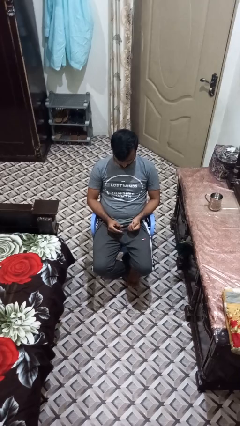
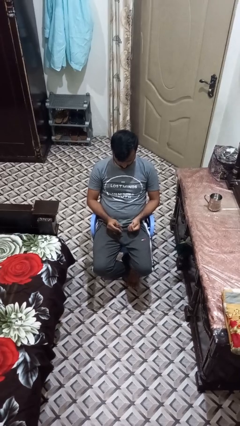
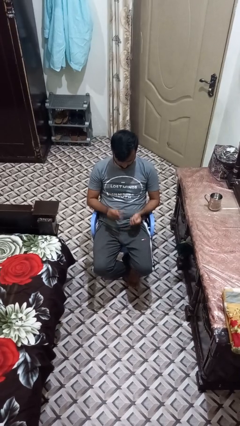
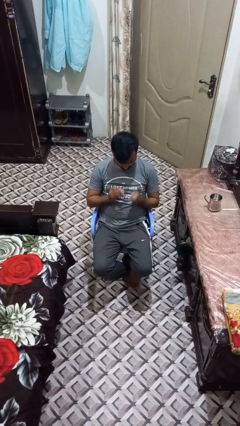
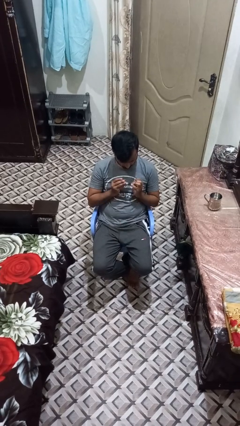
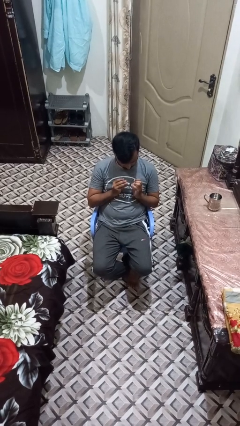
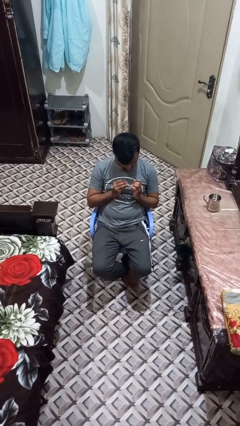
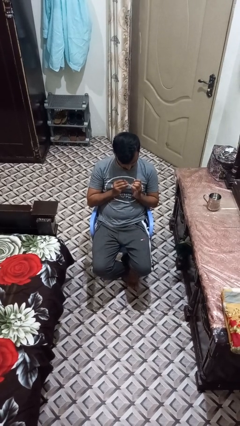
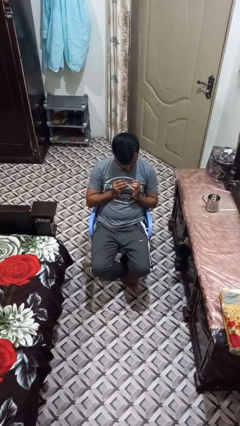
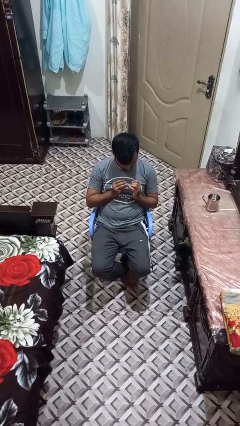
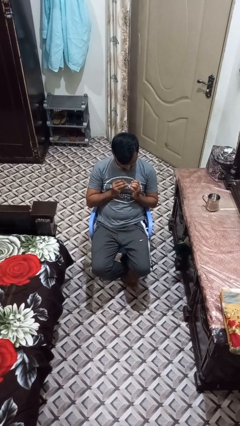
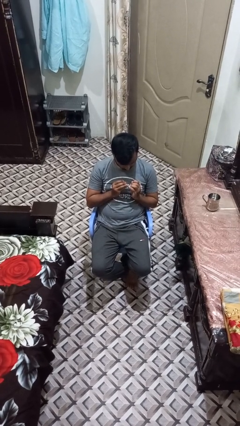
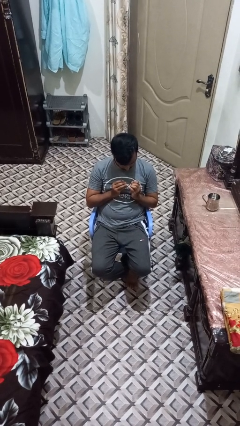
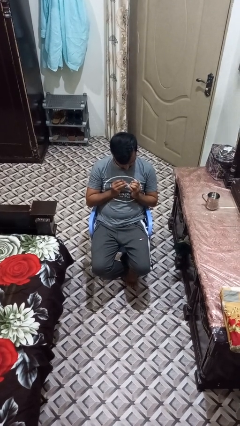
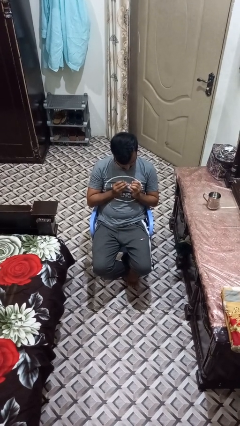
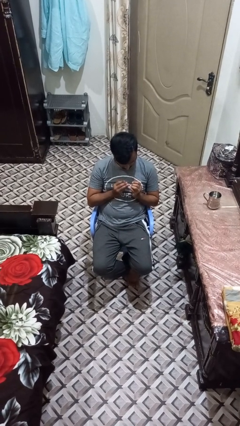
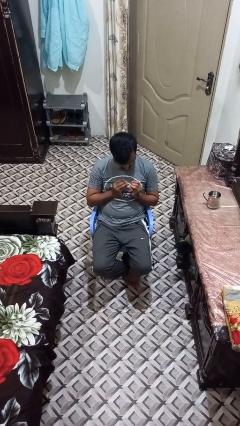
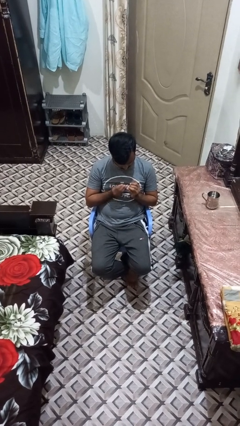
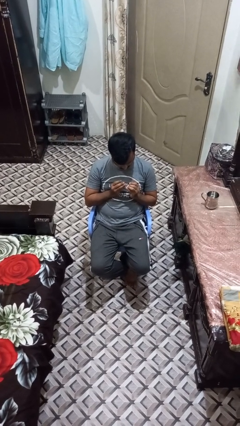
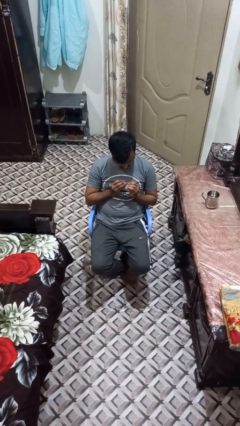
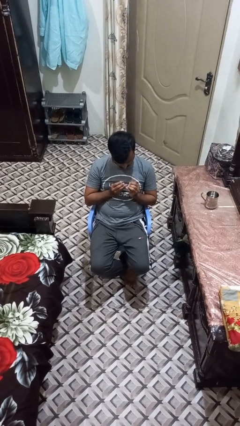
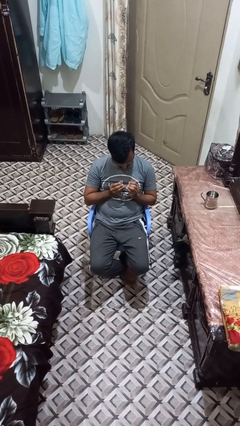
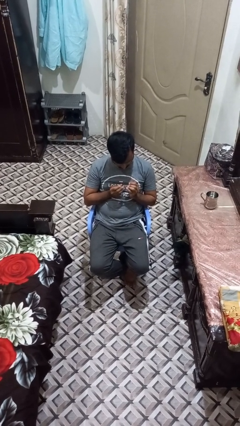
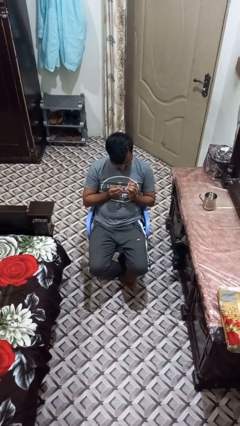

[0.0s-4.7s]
person clips fingernails

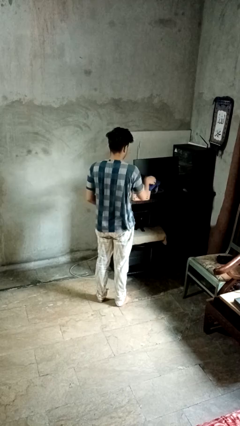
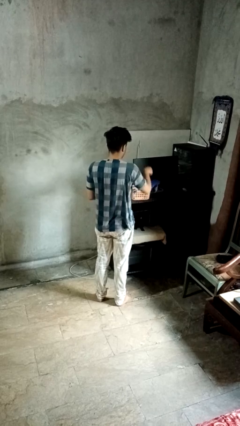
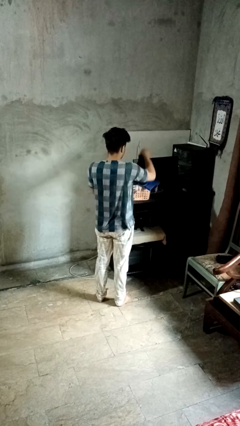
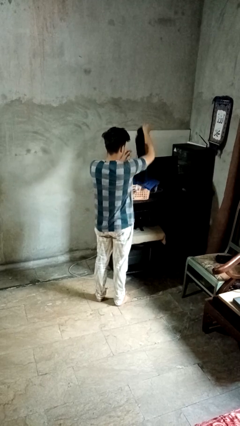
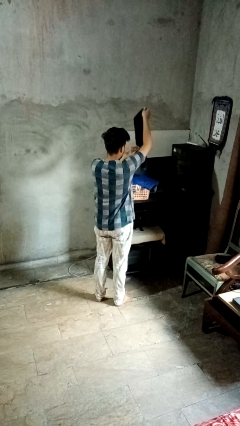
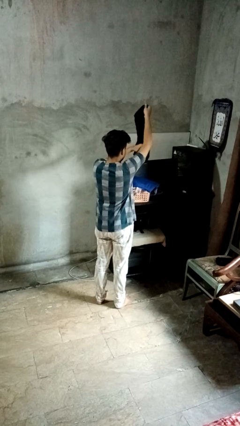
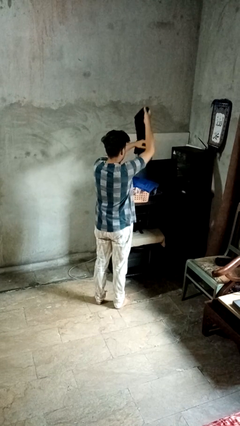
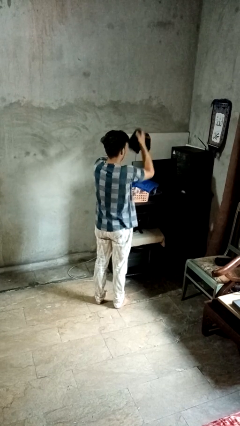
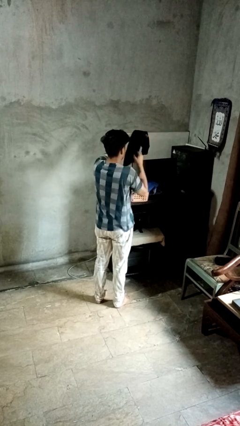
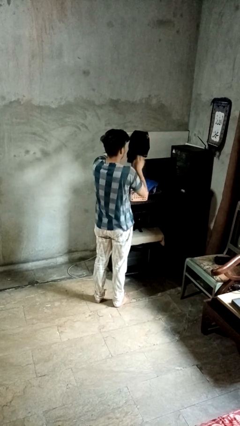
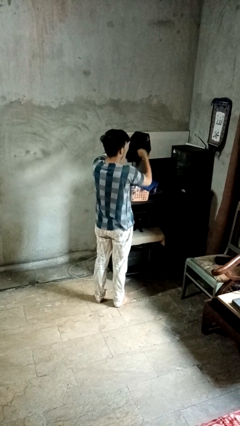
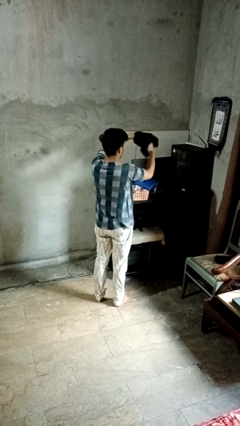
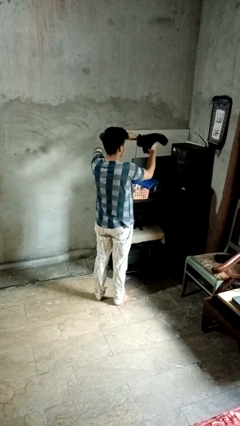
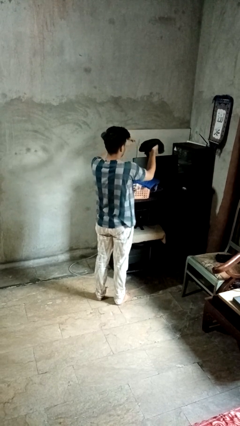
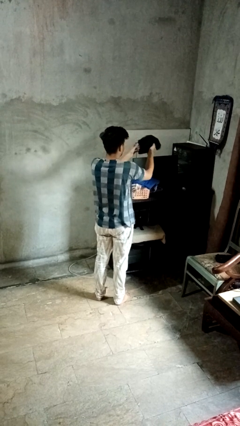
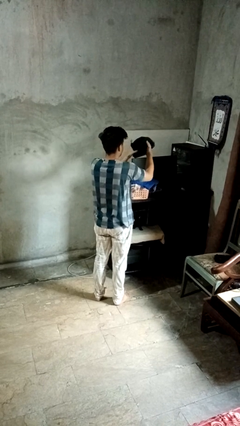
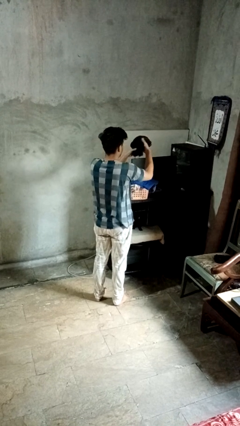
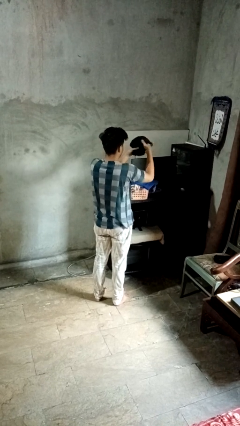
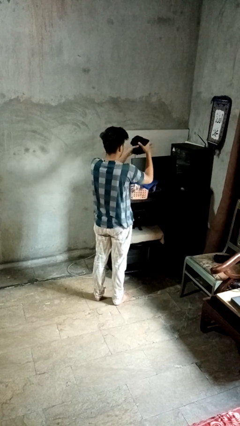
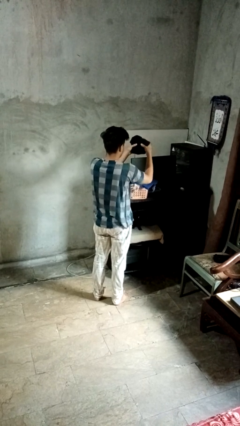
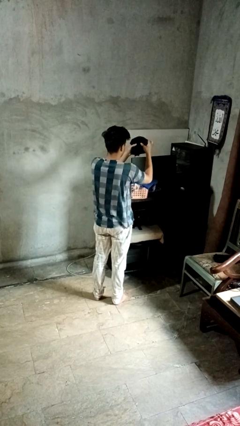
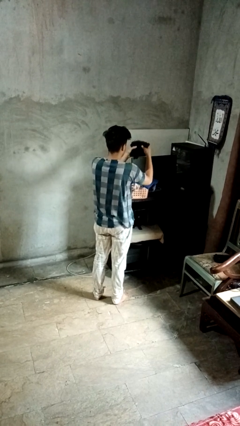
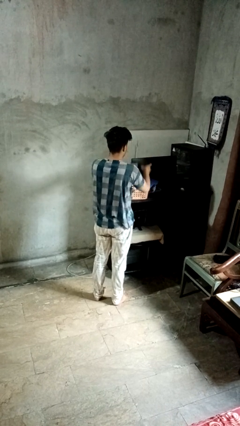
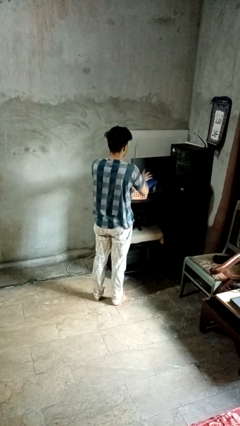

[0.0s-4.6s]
person folds shirt

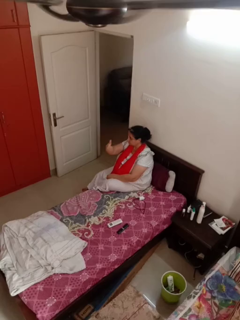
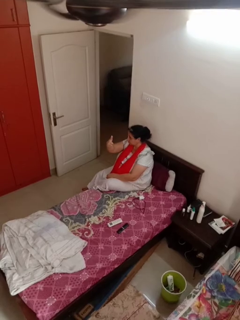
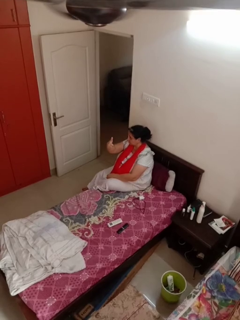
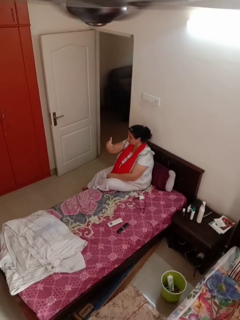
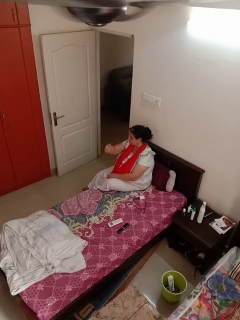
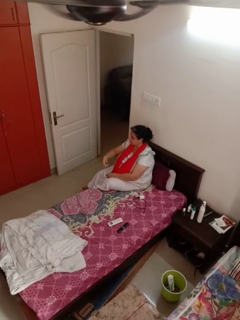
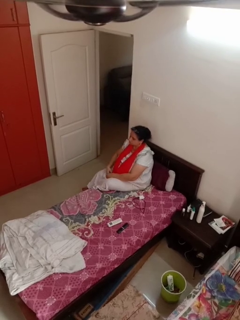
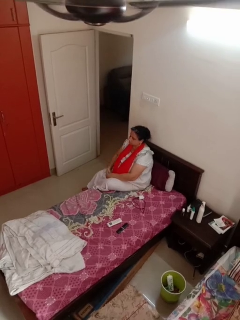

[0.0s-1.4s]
person gestures thumbs up

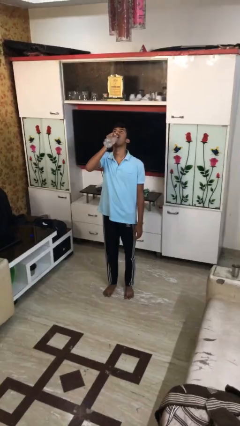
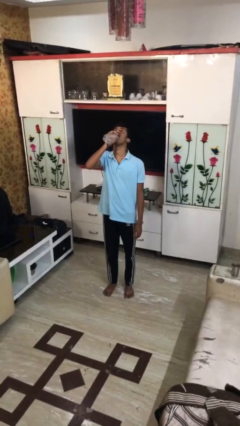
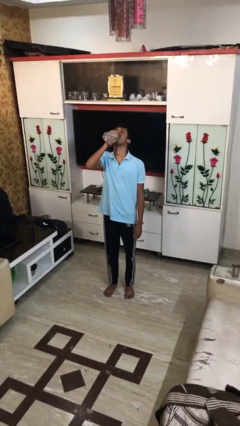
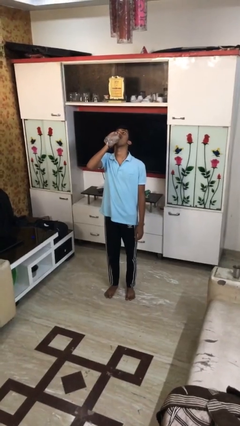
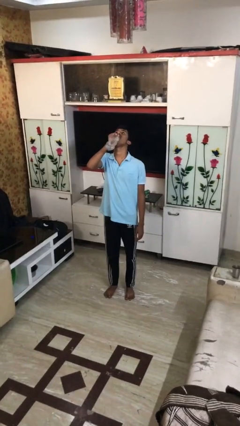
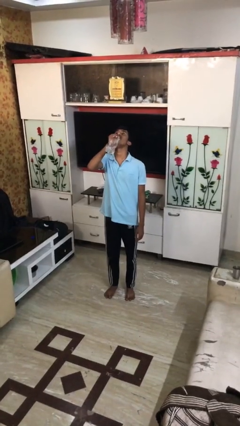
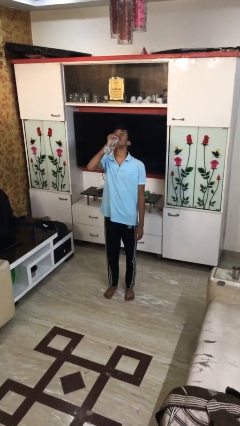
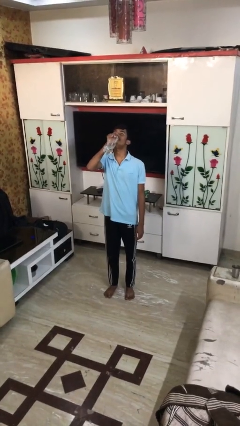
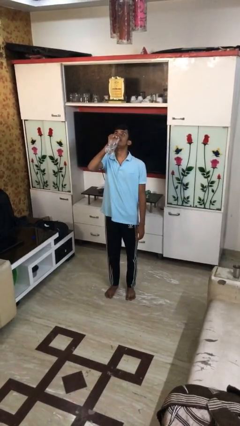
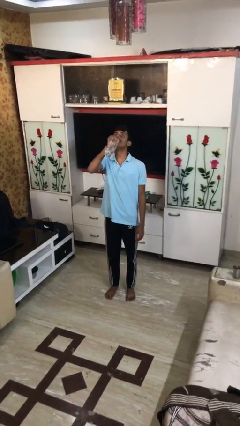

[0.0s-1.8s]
person drinks from bottle

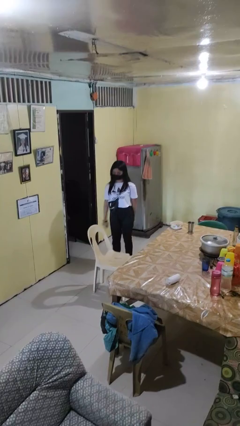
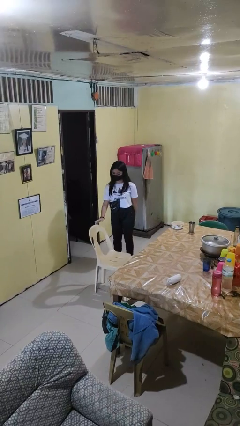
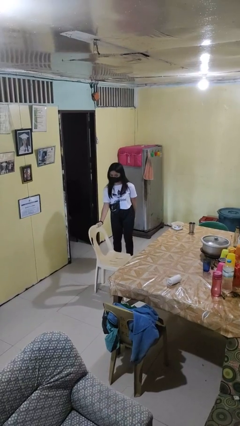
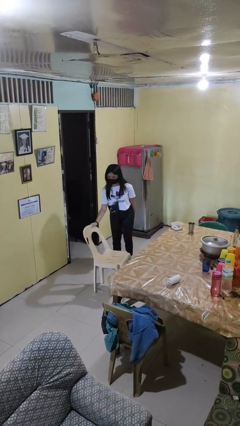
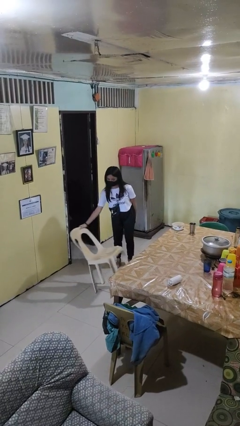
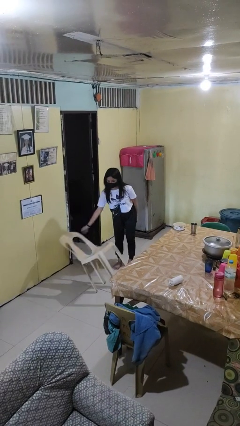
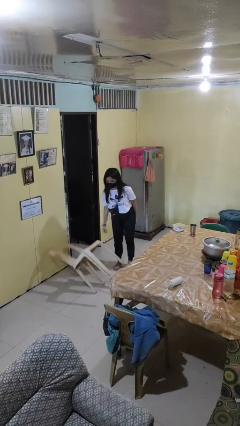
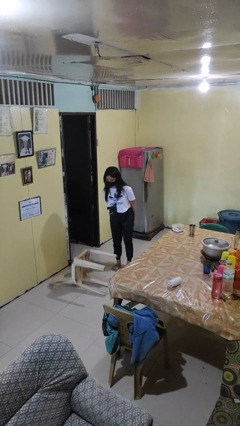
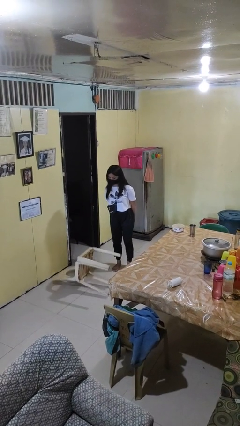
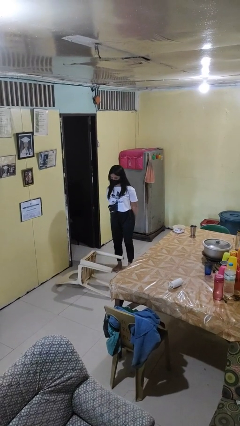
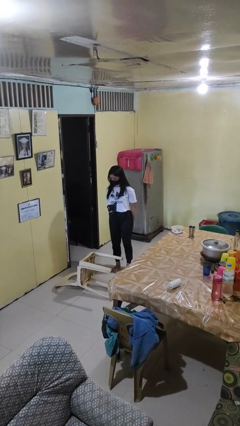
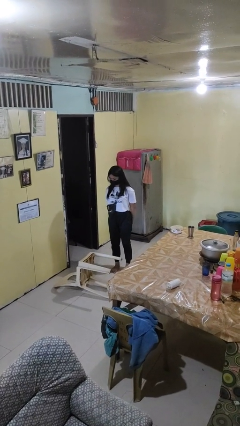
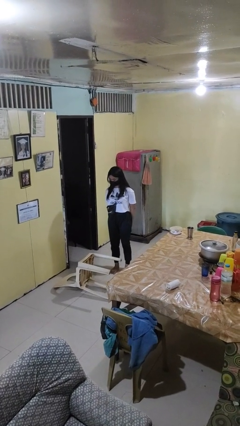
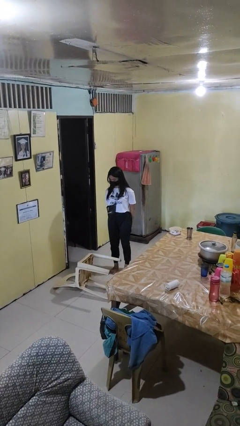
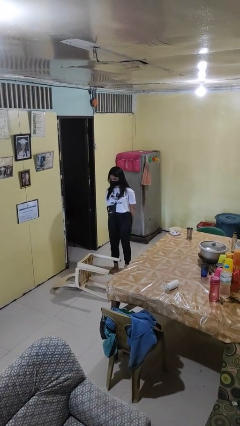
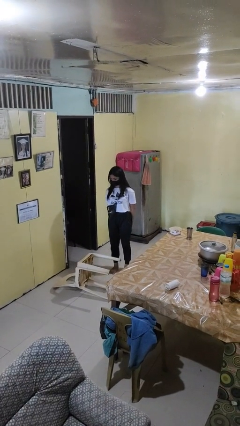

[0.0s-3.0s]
person knocks over furniture

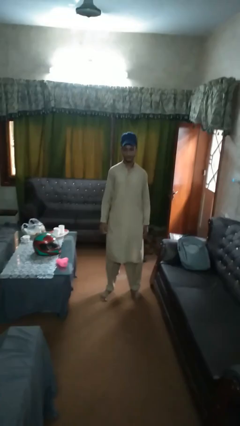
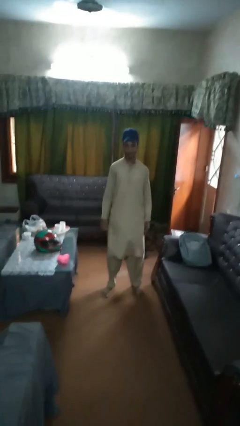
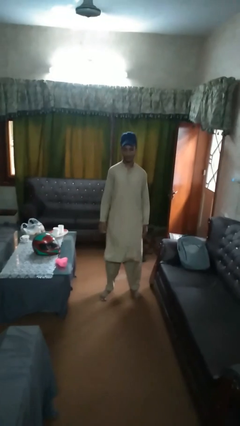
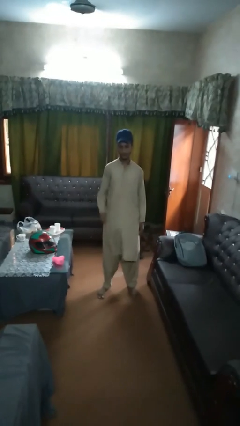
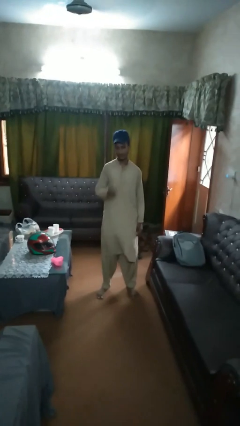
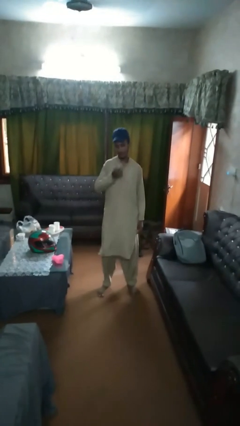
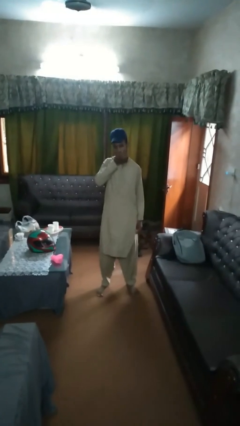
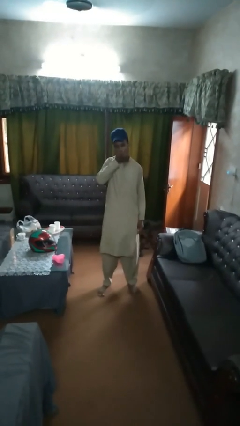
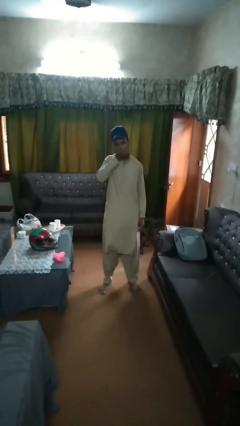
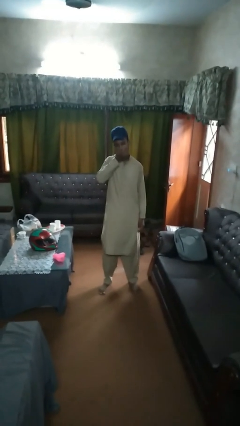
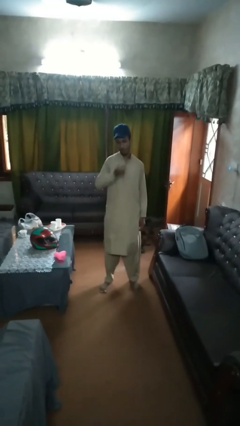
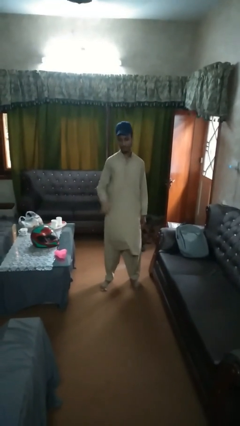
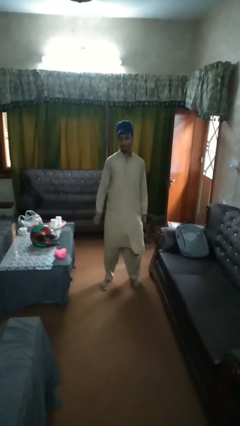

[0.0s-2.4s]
person eats apple
